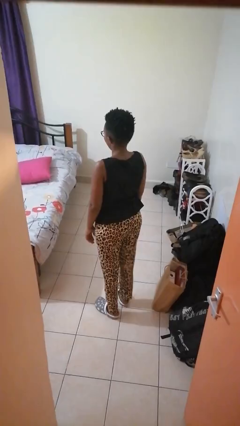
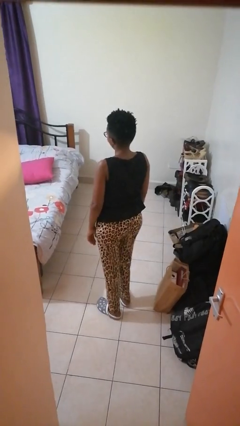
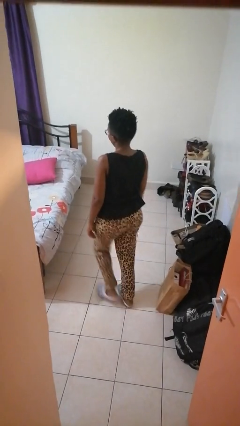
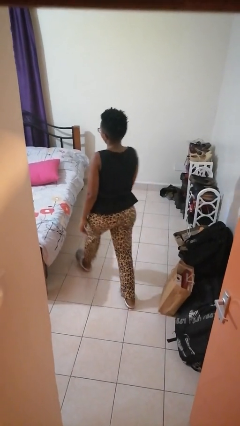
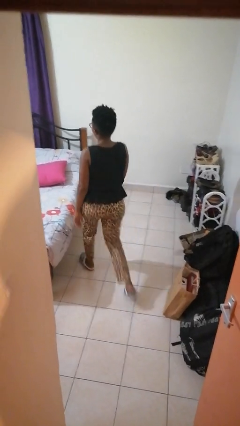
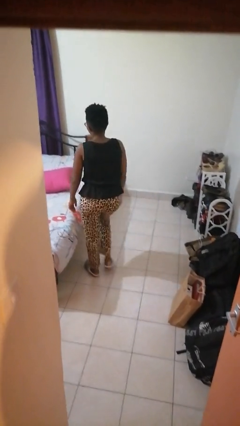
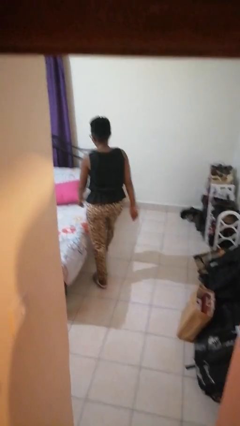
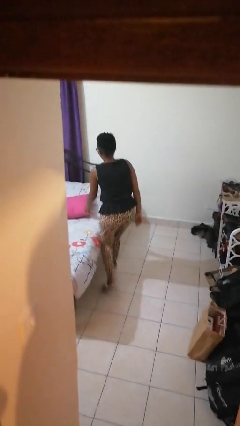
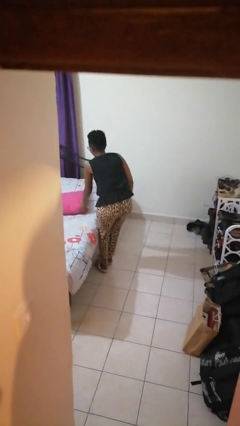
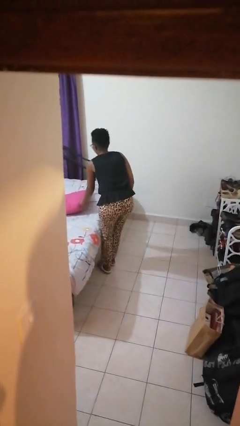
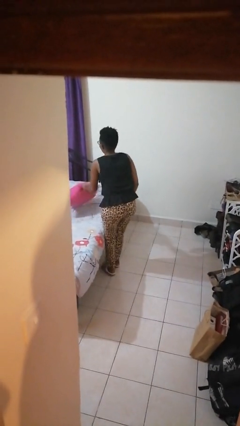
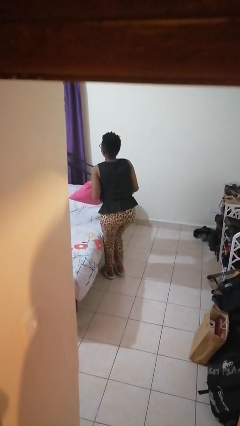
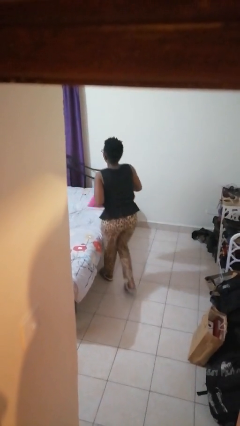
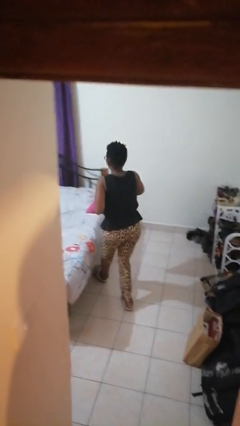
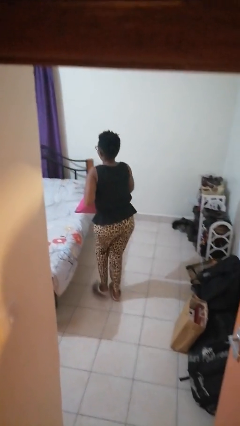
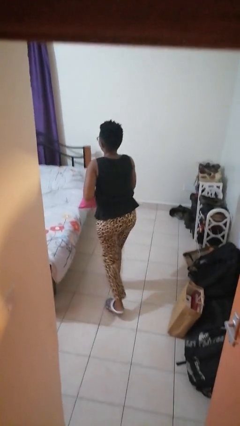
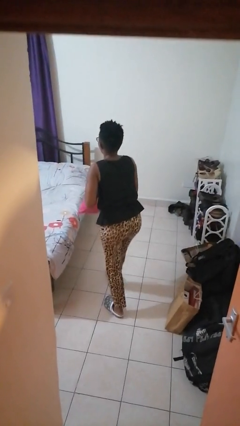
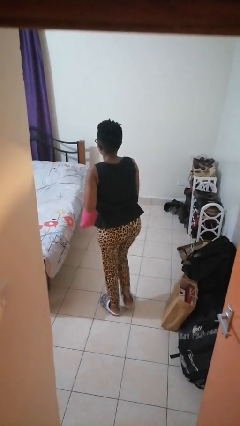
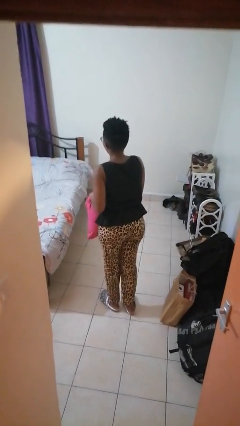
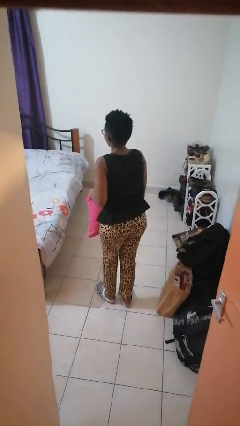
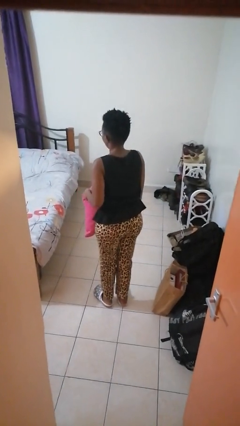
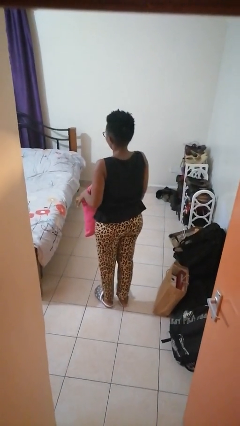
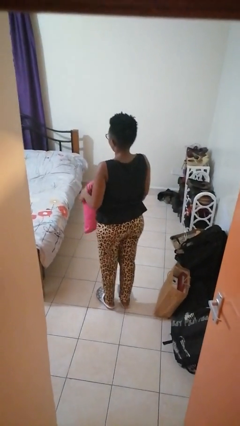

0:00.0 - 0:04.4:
person picks up object from bed

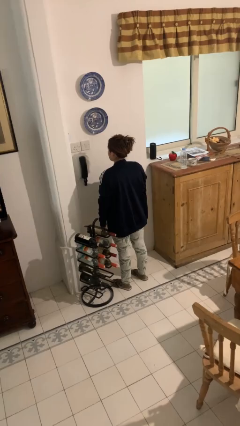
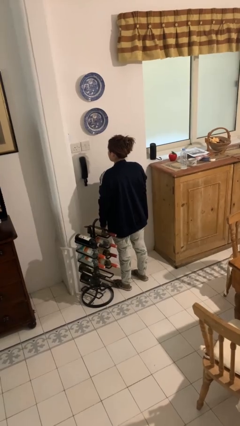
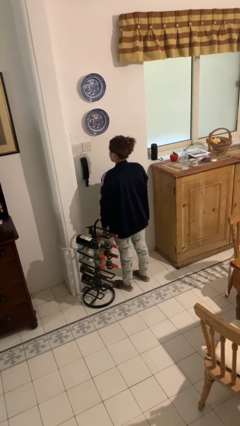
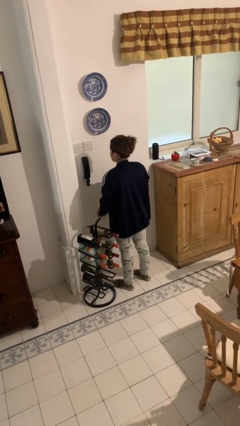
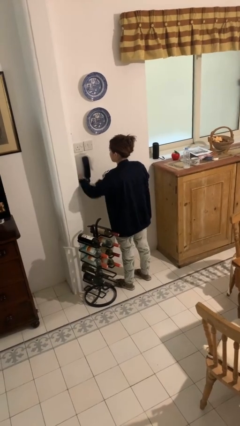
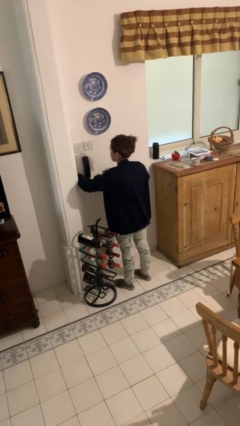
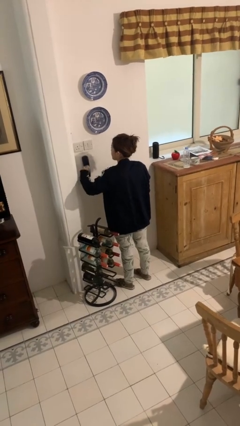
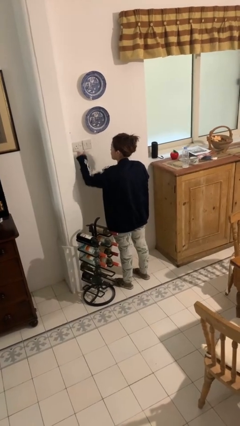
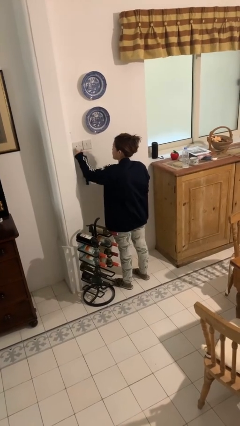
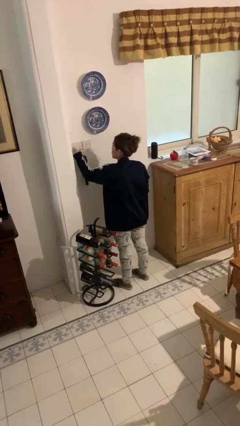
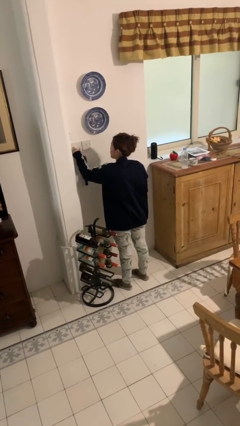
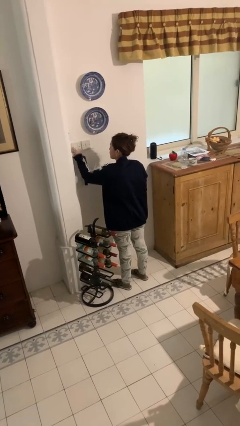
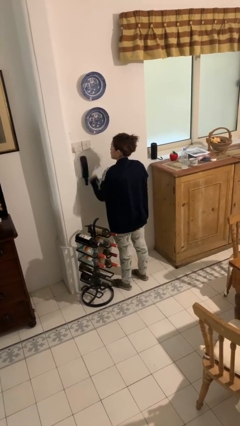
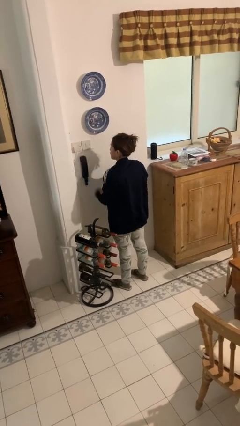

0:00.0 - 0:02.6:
person plugs into electrical socket

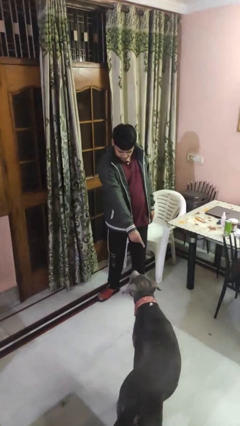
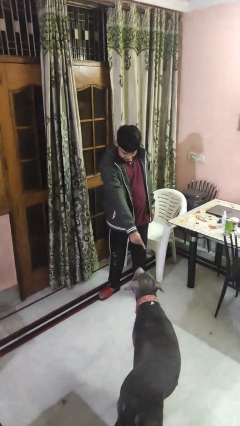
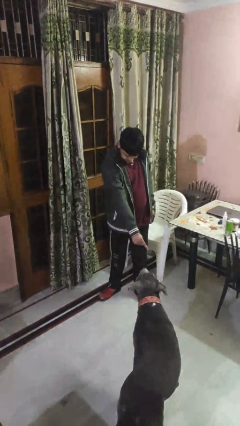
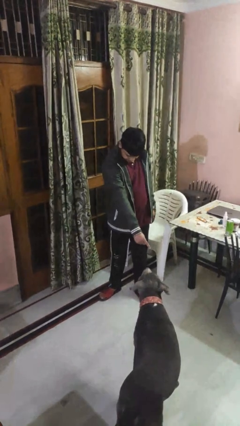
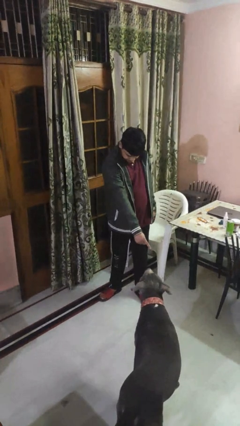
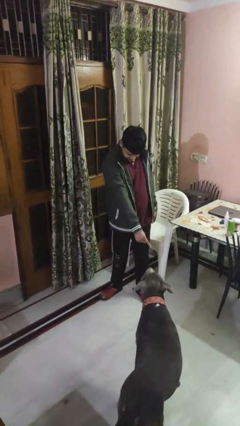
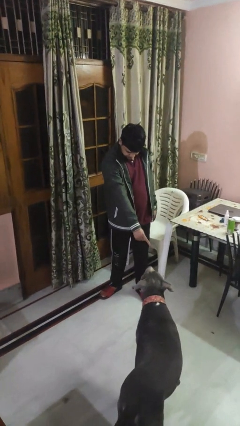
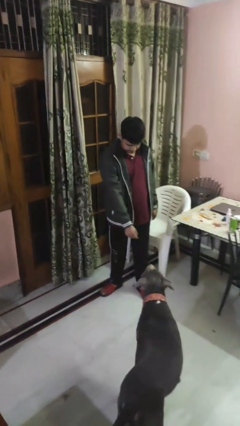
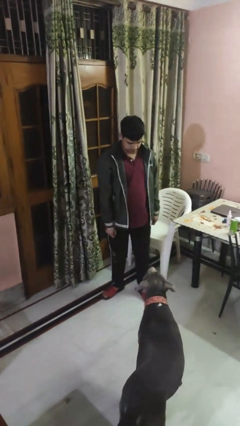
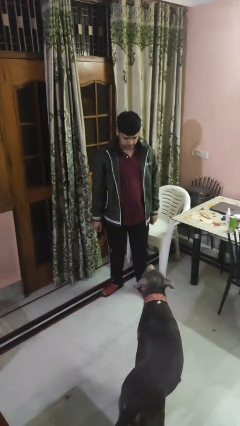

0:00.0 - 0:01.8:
person points to dog

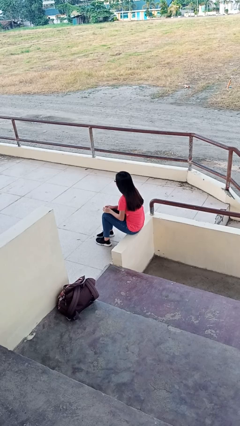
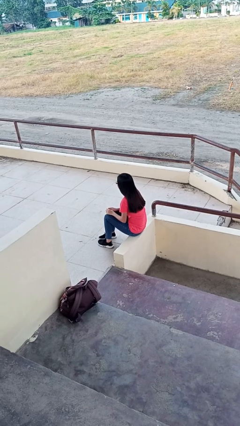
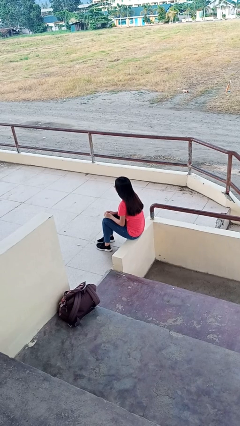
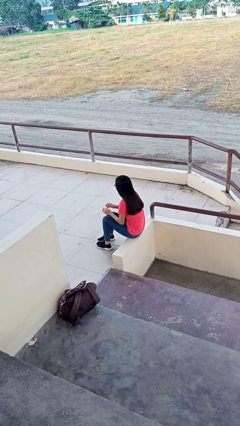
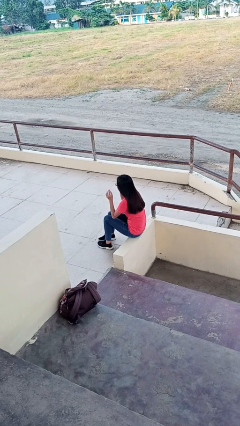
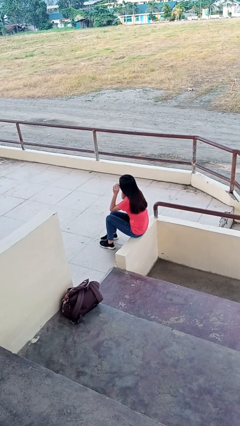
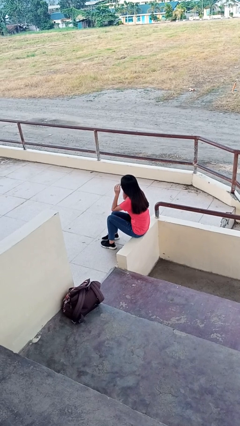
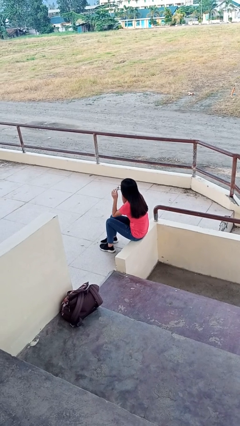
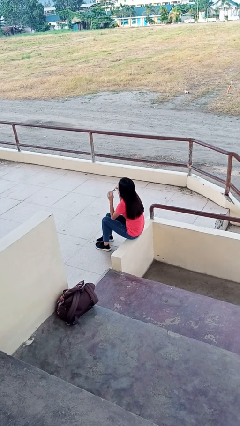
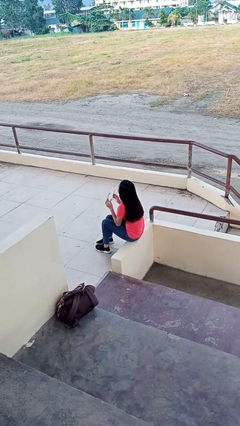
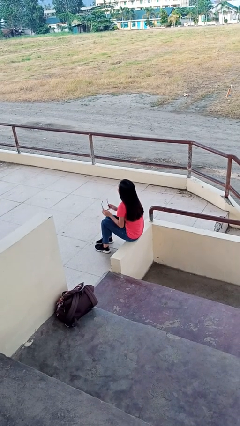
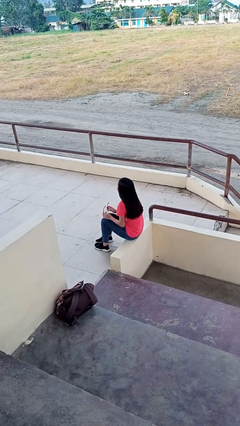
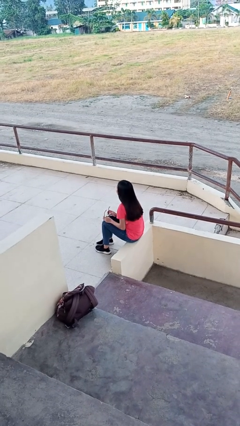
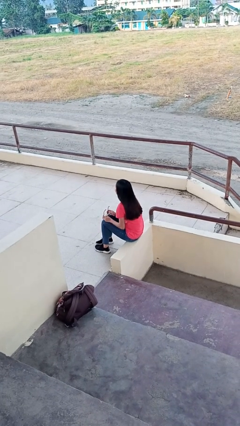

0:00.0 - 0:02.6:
person takes off glasses

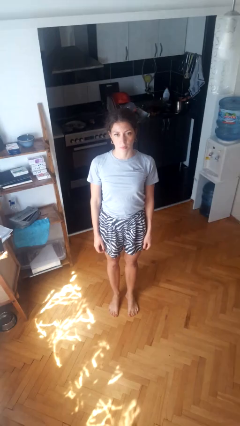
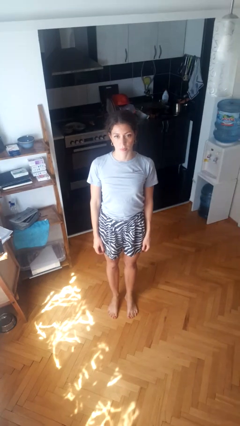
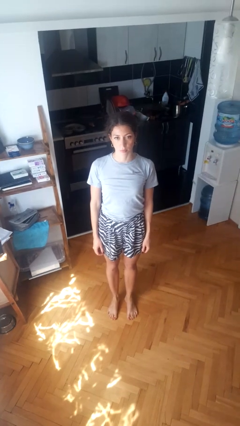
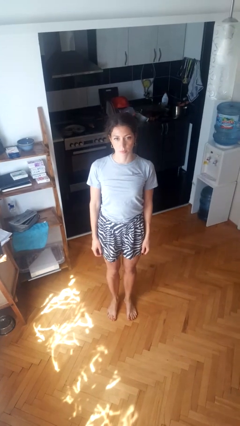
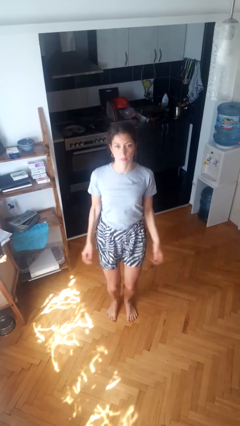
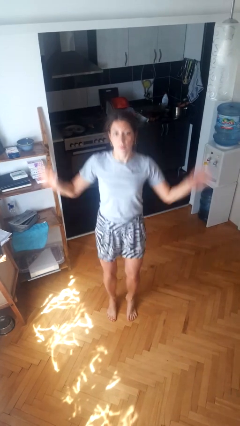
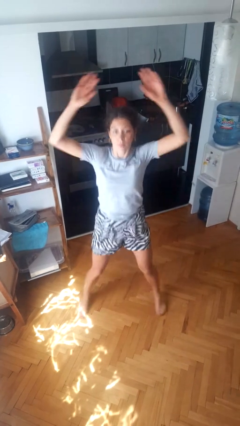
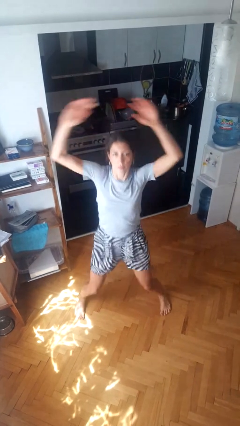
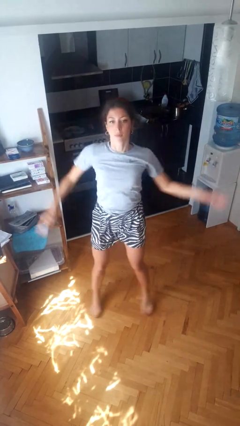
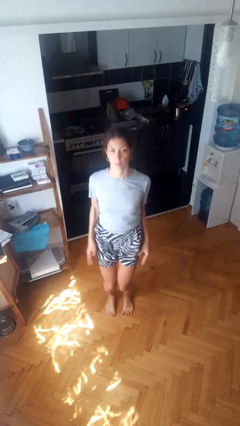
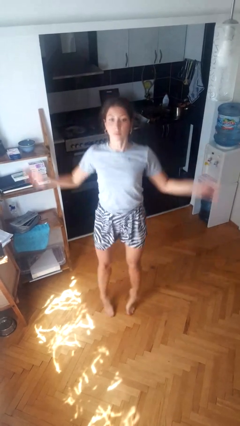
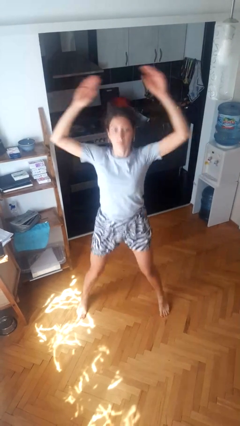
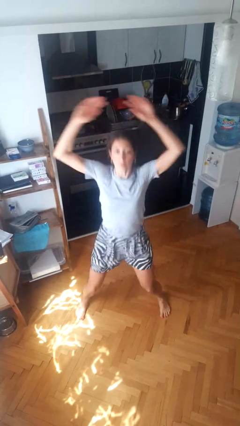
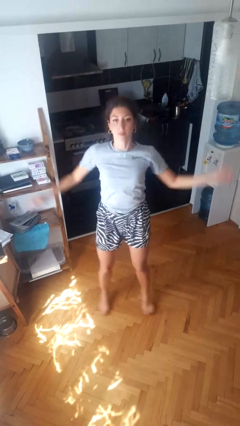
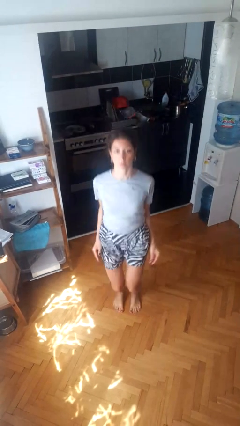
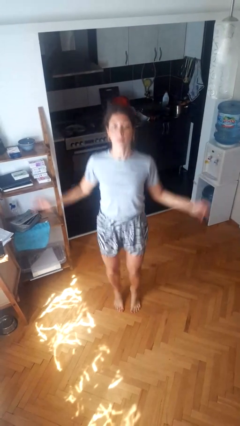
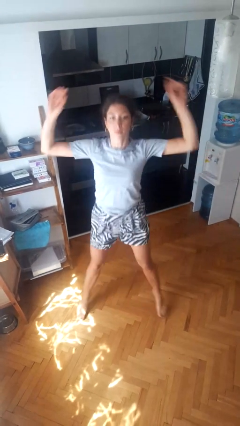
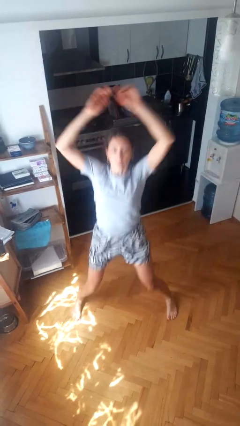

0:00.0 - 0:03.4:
person exercises with jumping jacks

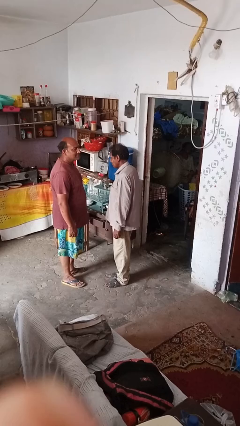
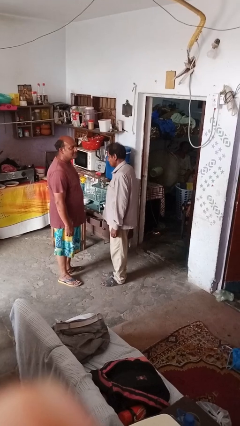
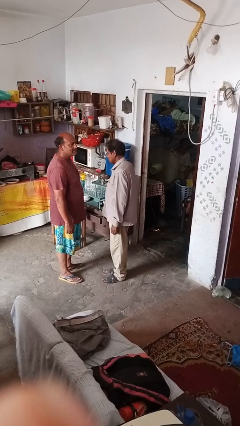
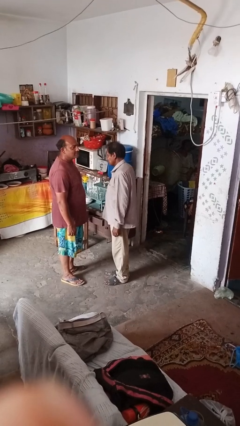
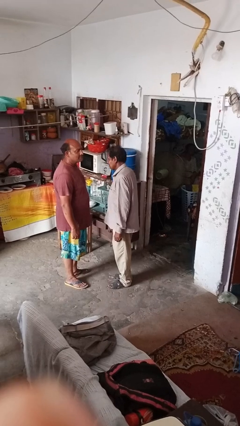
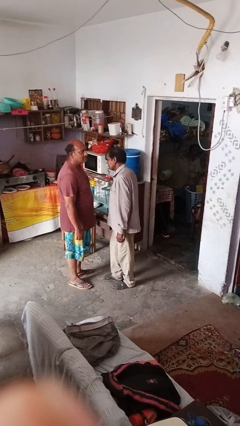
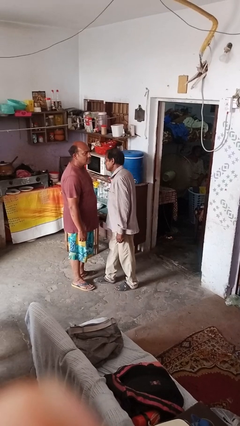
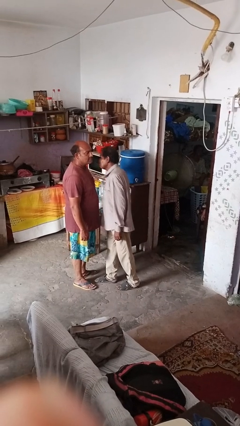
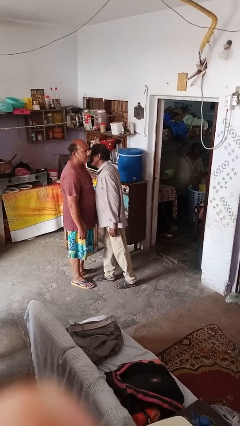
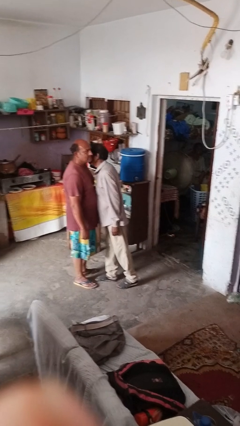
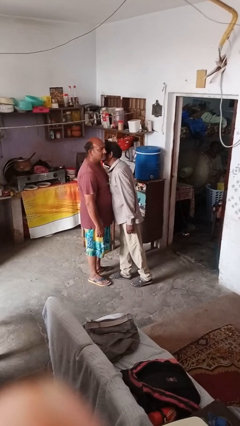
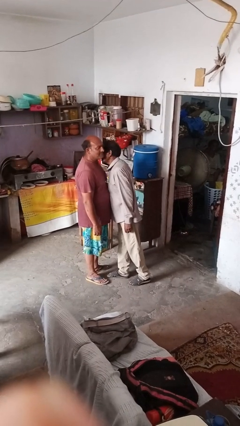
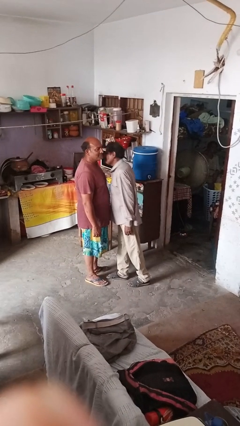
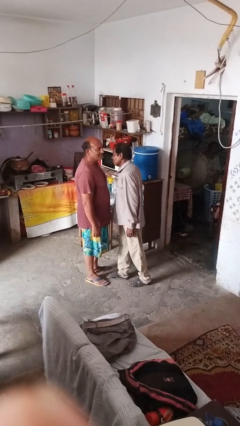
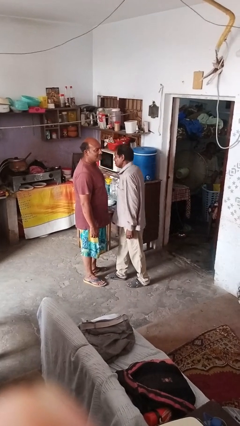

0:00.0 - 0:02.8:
person kisses cheek of person
